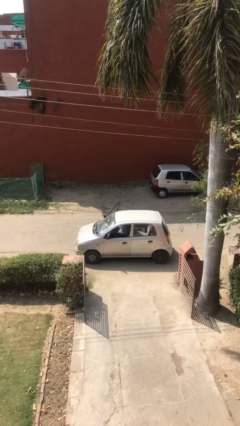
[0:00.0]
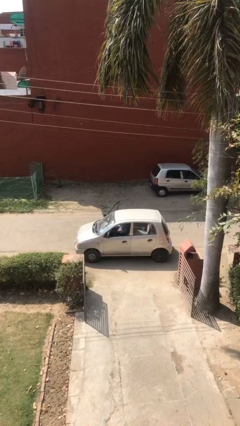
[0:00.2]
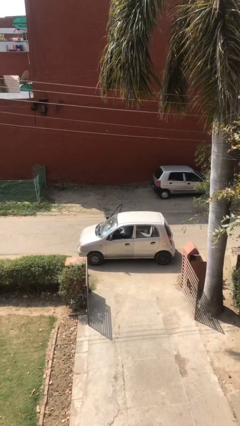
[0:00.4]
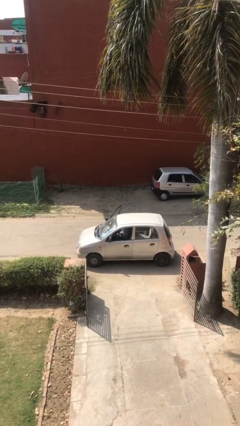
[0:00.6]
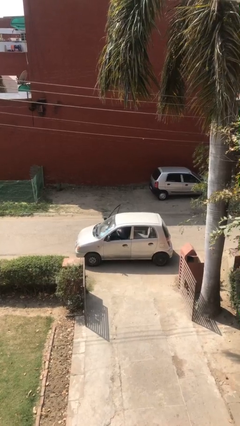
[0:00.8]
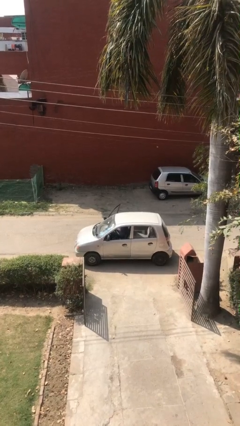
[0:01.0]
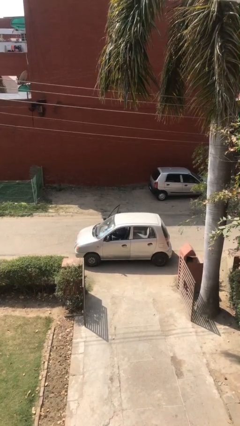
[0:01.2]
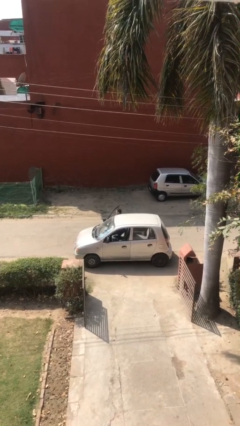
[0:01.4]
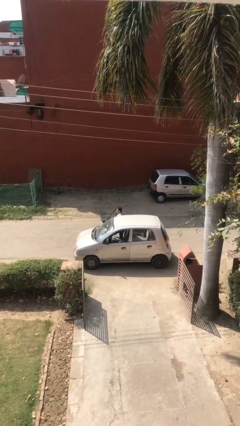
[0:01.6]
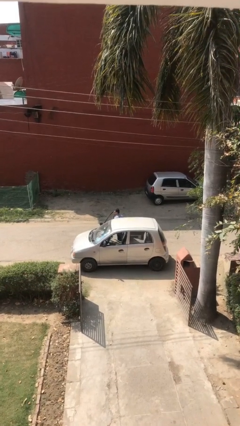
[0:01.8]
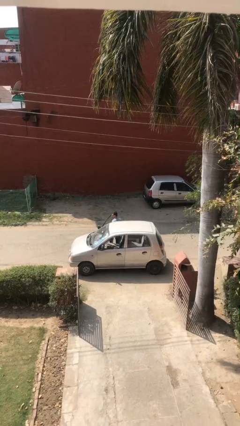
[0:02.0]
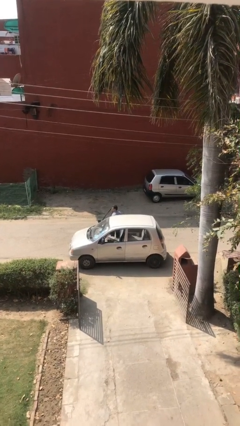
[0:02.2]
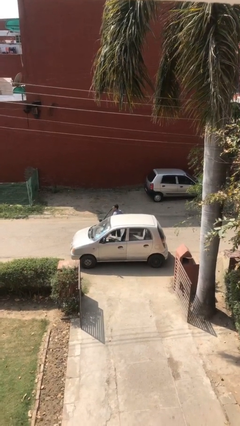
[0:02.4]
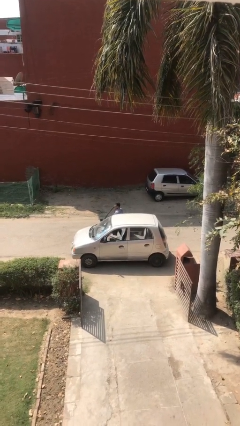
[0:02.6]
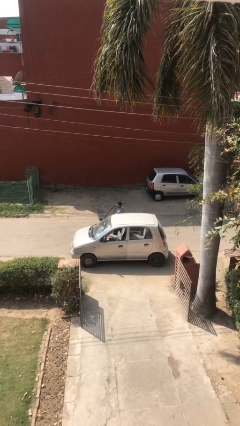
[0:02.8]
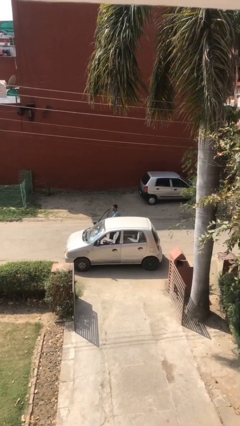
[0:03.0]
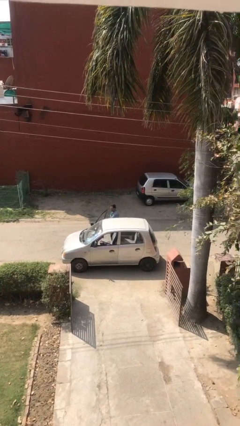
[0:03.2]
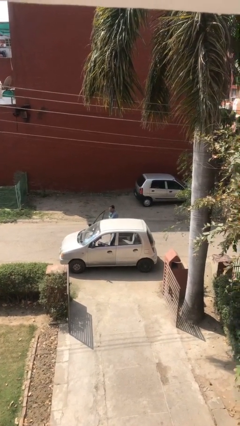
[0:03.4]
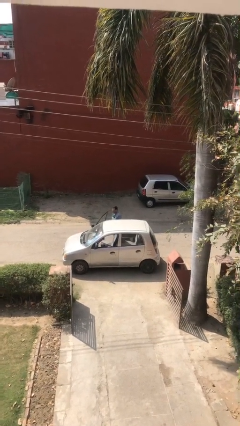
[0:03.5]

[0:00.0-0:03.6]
person exits car

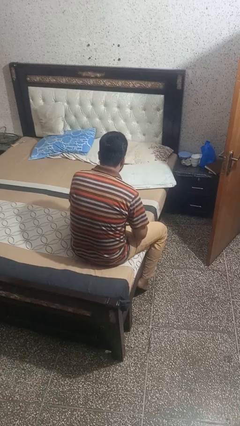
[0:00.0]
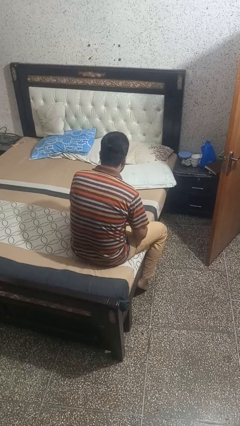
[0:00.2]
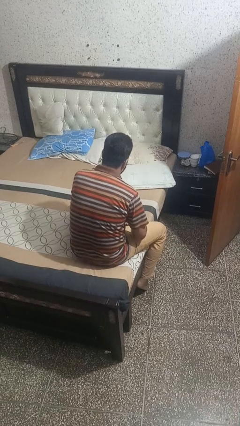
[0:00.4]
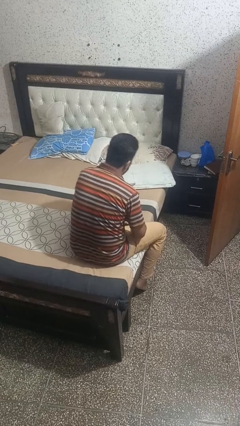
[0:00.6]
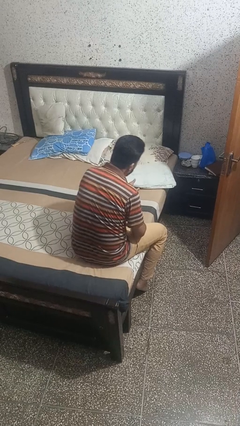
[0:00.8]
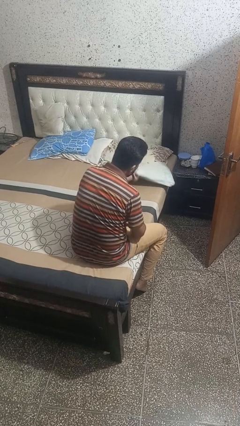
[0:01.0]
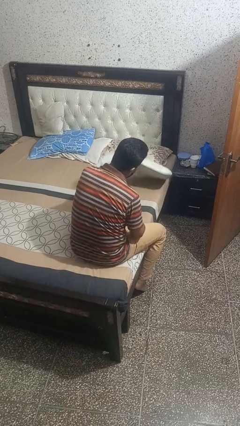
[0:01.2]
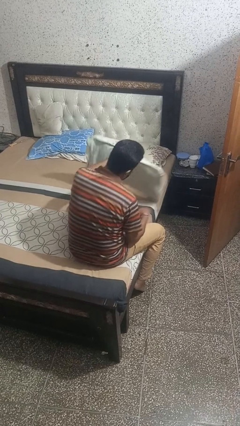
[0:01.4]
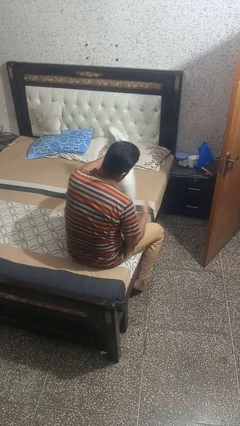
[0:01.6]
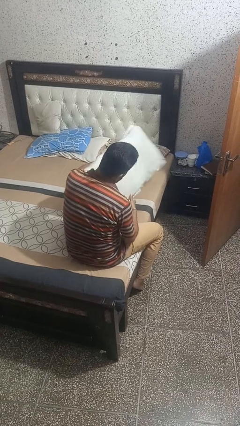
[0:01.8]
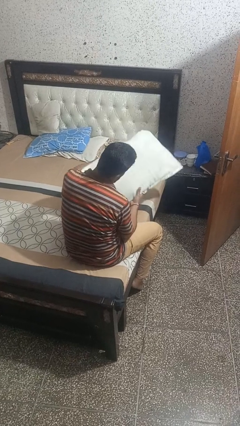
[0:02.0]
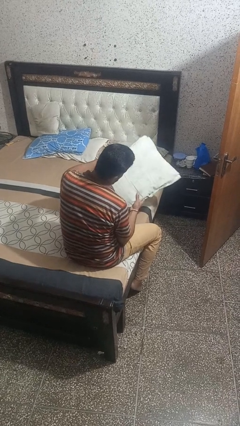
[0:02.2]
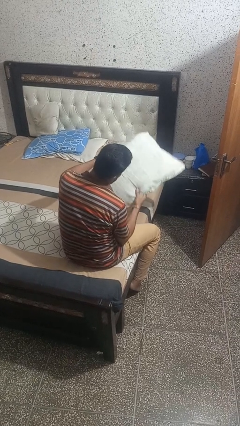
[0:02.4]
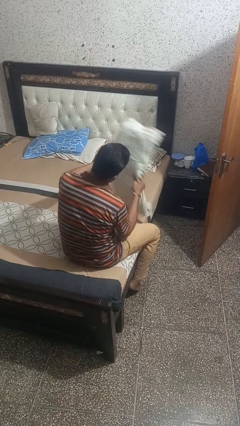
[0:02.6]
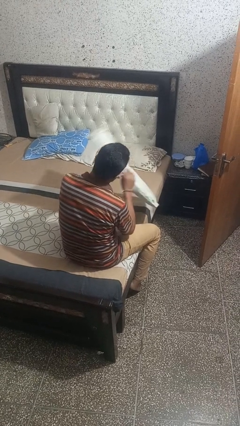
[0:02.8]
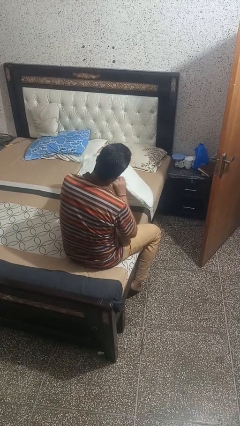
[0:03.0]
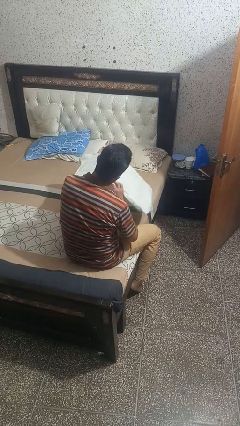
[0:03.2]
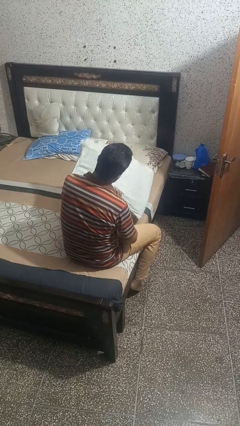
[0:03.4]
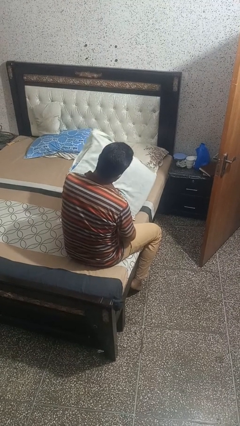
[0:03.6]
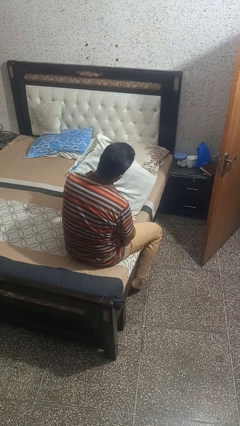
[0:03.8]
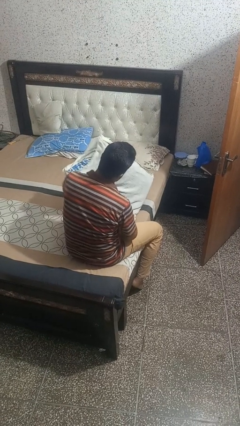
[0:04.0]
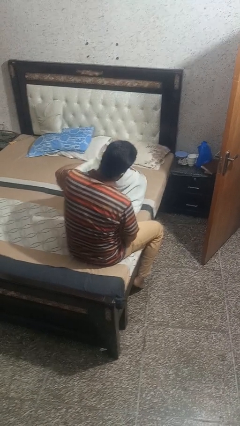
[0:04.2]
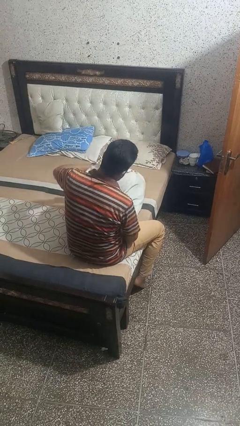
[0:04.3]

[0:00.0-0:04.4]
person picks up object from bed

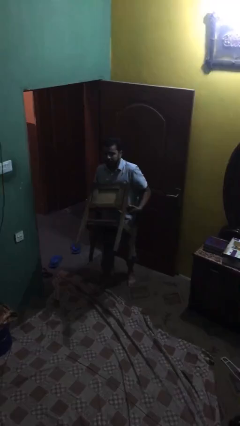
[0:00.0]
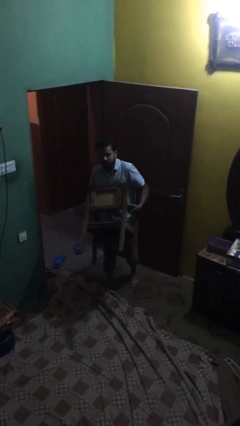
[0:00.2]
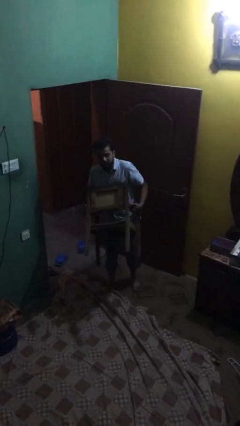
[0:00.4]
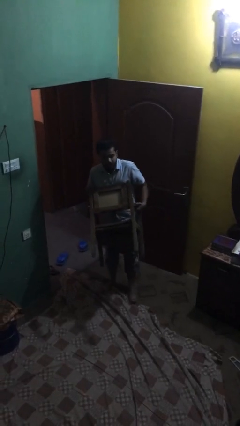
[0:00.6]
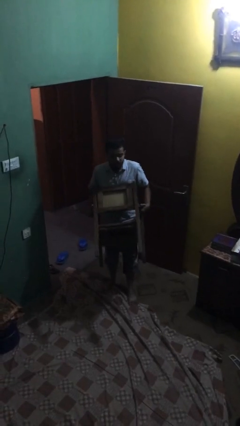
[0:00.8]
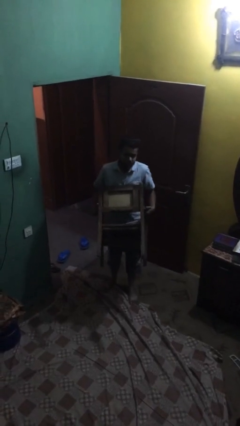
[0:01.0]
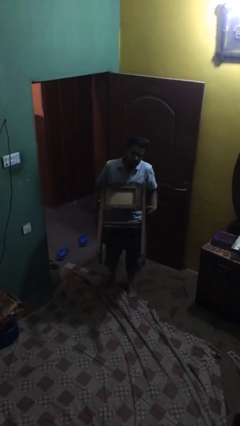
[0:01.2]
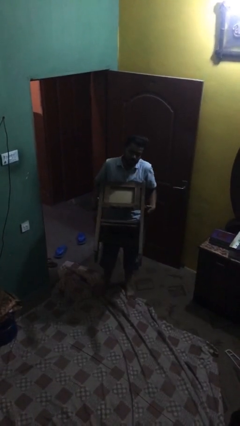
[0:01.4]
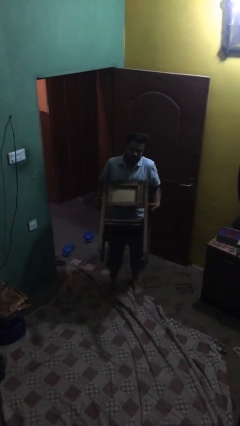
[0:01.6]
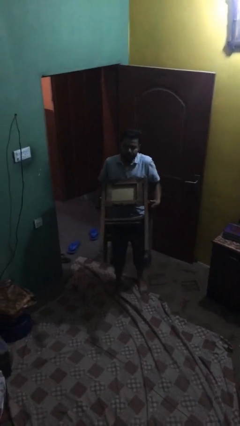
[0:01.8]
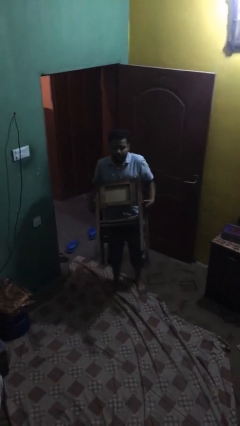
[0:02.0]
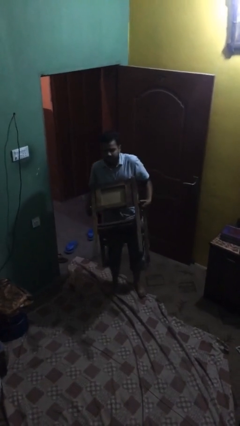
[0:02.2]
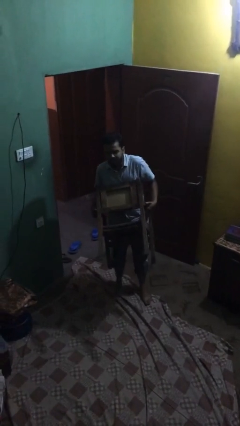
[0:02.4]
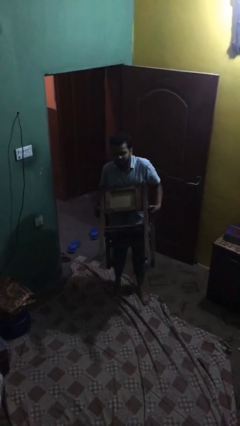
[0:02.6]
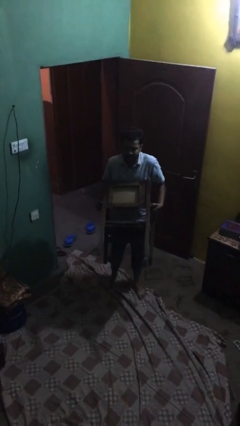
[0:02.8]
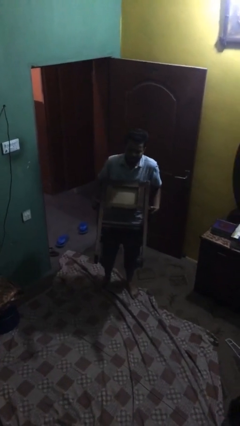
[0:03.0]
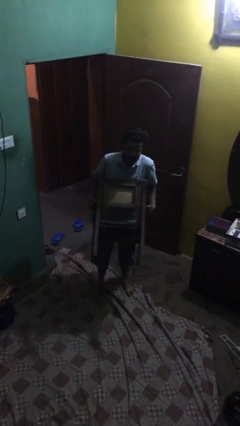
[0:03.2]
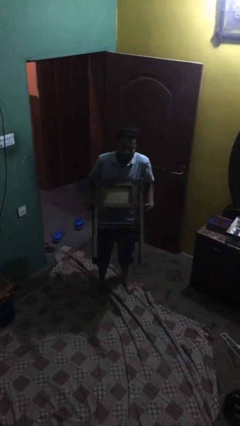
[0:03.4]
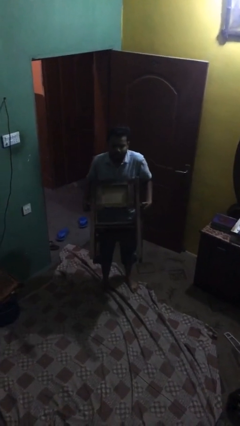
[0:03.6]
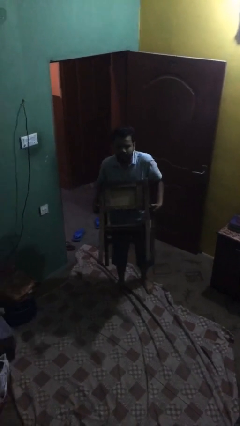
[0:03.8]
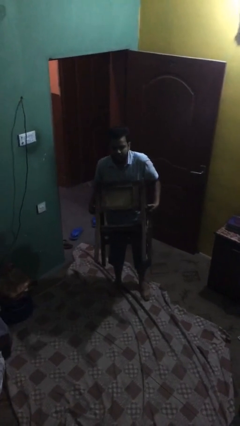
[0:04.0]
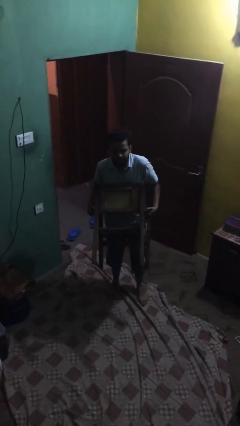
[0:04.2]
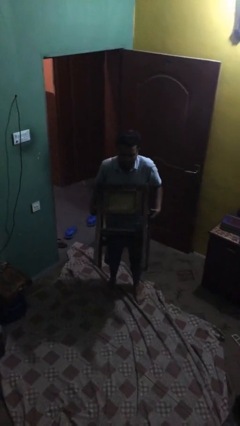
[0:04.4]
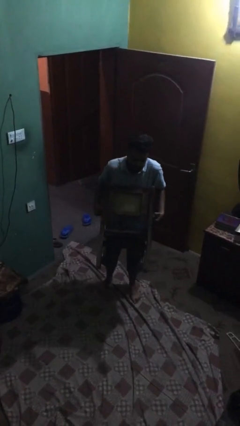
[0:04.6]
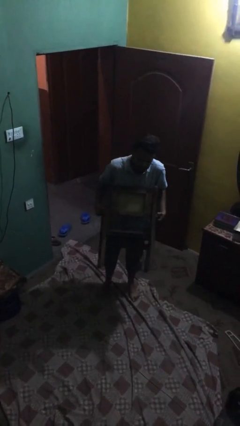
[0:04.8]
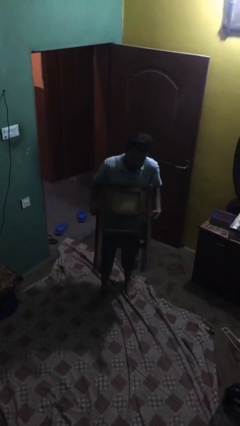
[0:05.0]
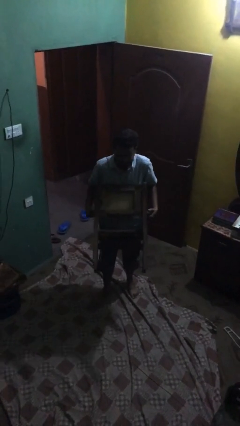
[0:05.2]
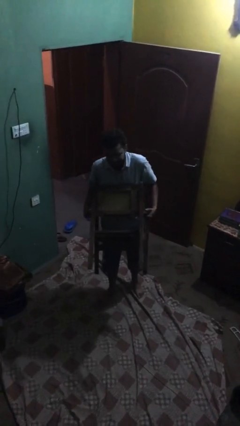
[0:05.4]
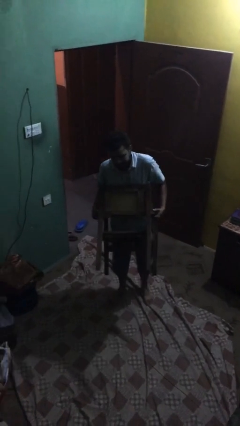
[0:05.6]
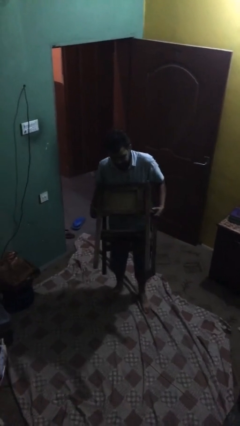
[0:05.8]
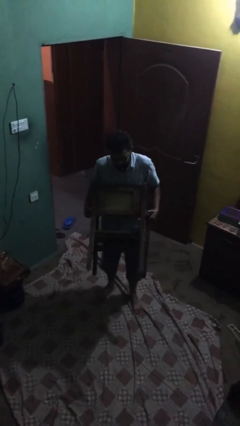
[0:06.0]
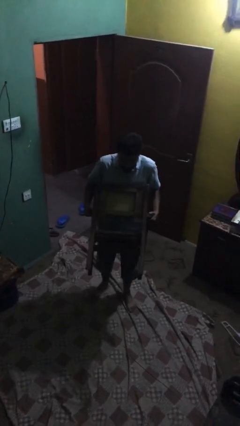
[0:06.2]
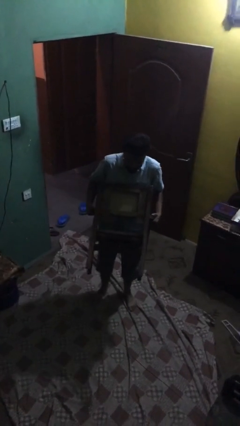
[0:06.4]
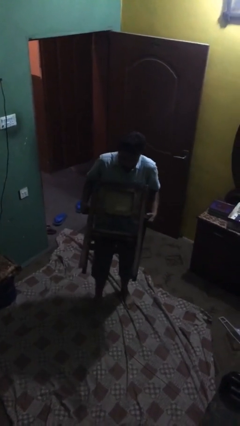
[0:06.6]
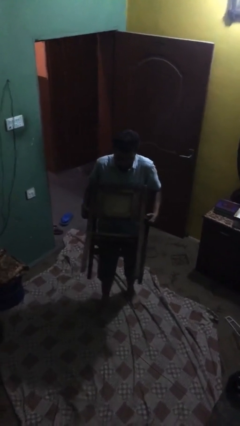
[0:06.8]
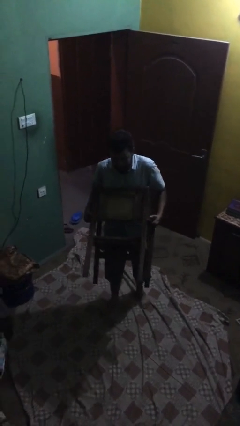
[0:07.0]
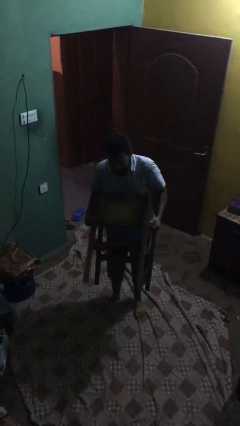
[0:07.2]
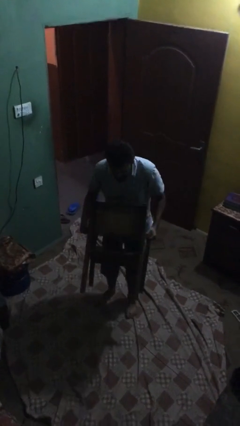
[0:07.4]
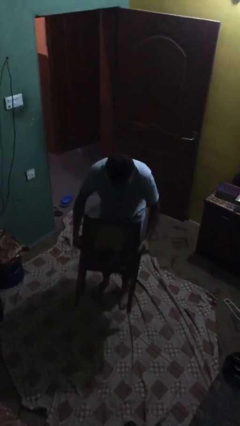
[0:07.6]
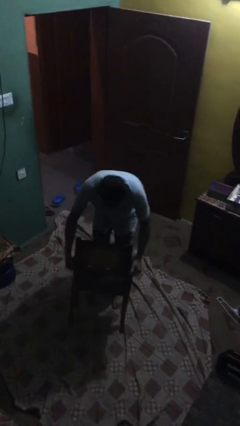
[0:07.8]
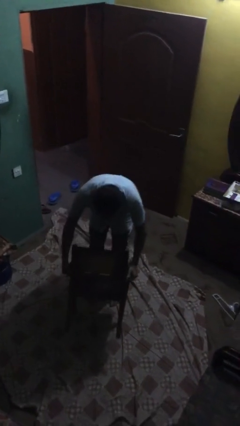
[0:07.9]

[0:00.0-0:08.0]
person carries heavy object

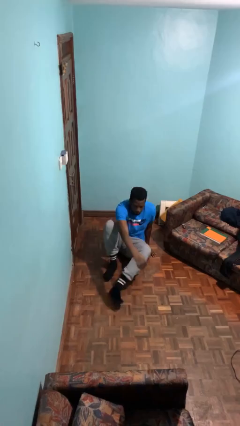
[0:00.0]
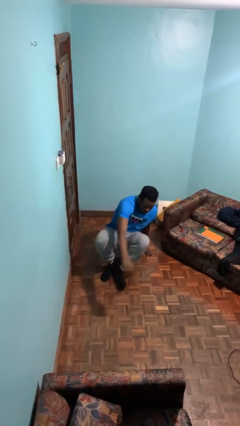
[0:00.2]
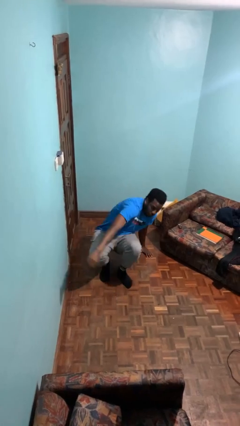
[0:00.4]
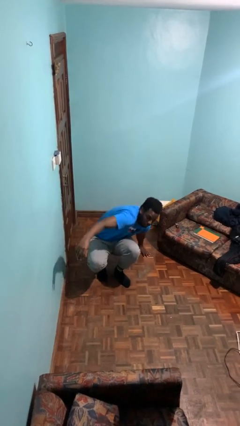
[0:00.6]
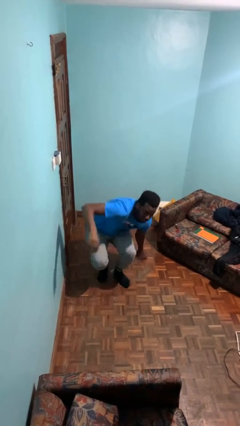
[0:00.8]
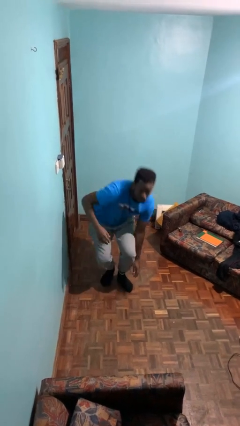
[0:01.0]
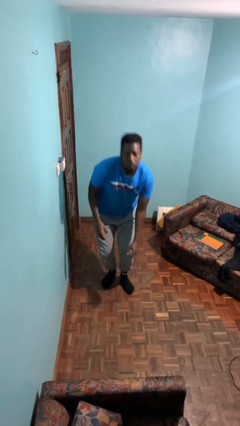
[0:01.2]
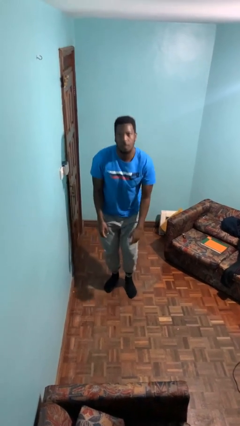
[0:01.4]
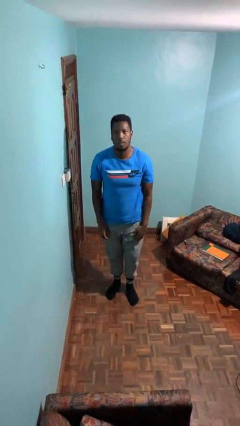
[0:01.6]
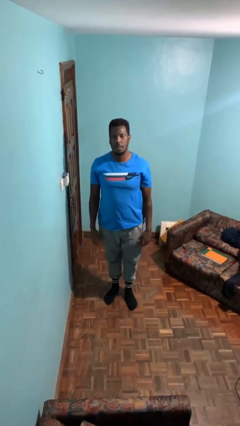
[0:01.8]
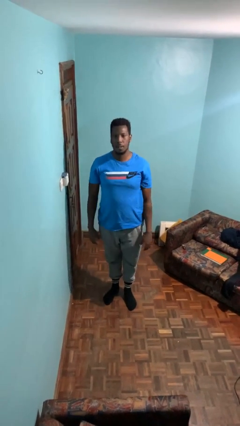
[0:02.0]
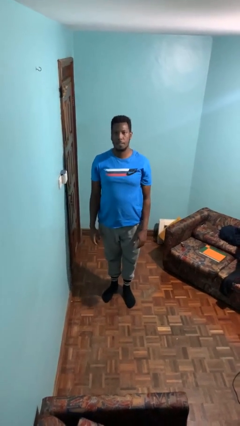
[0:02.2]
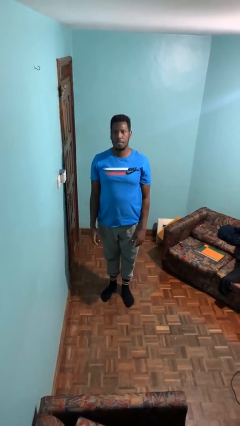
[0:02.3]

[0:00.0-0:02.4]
person stands up from floor
